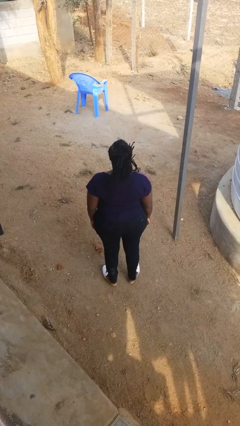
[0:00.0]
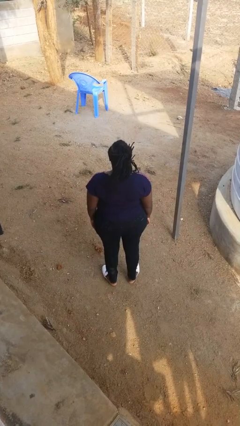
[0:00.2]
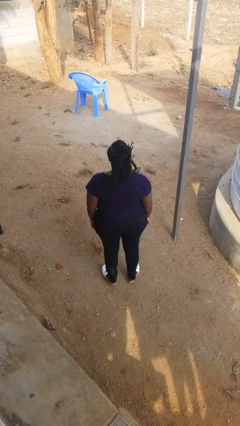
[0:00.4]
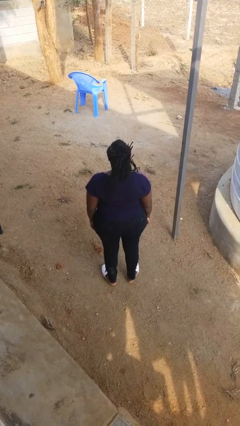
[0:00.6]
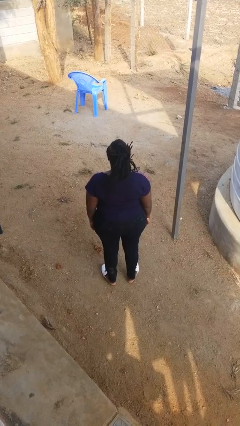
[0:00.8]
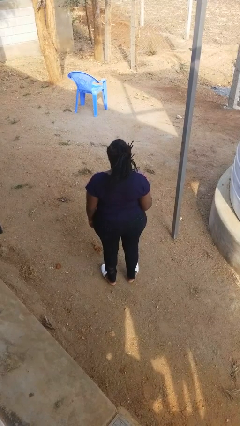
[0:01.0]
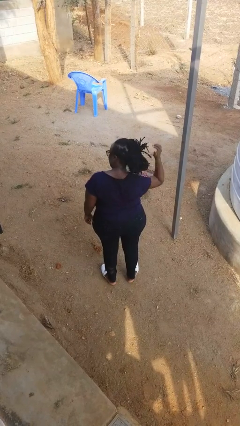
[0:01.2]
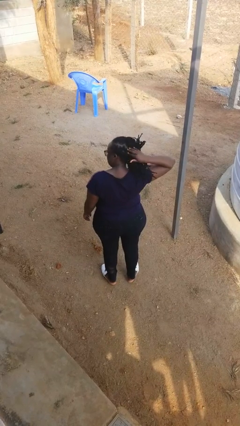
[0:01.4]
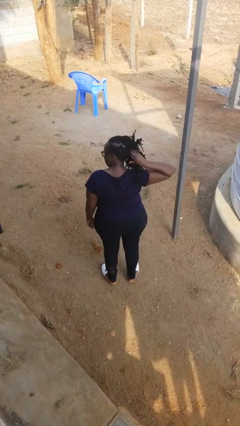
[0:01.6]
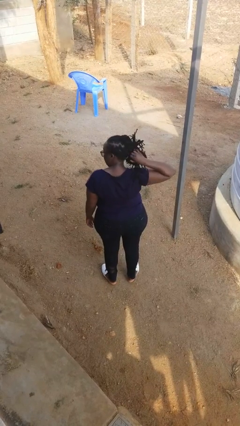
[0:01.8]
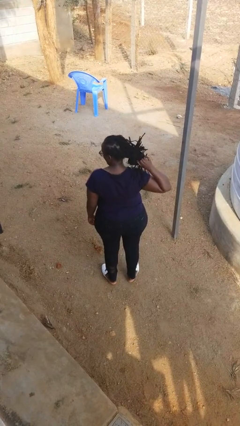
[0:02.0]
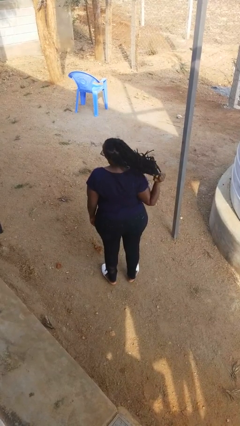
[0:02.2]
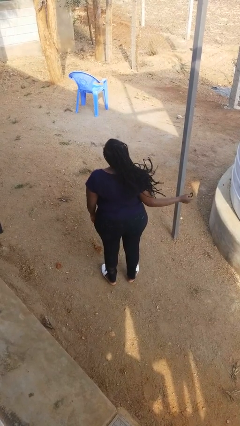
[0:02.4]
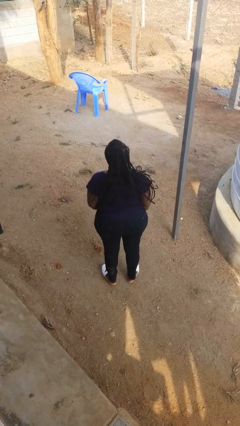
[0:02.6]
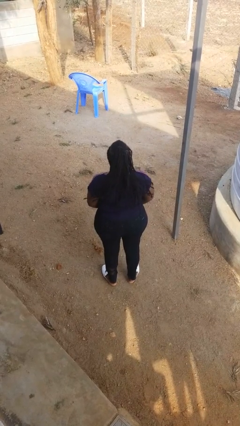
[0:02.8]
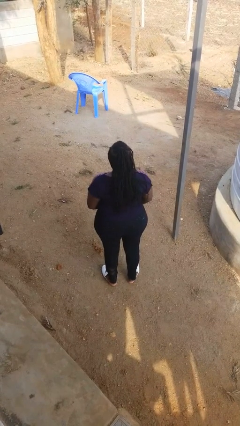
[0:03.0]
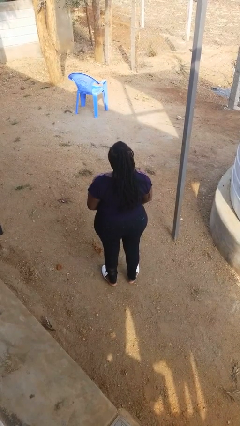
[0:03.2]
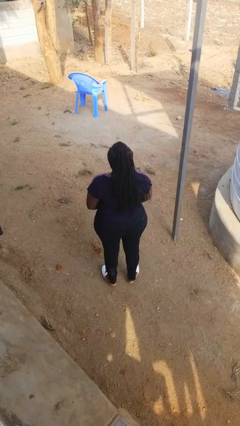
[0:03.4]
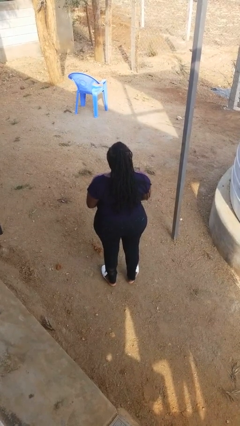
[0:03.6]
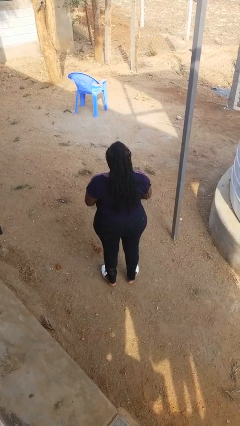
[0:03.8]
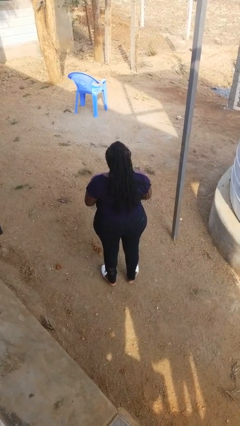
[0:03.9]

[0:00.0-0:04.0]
person takes off hairtie

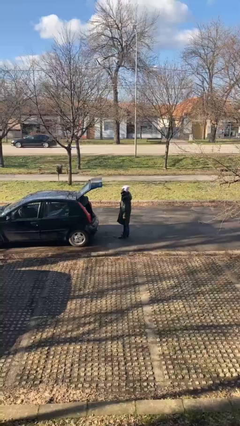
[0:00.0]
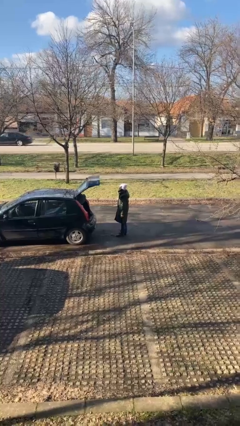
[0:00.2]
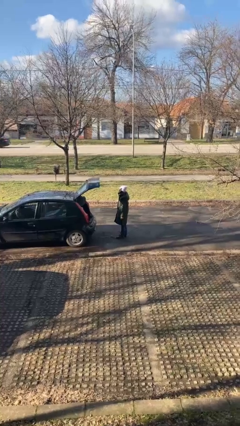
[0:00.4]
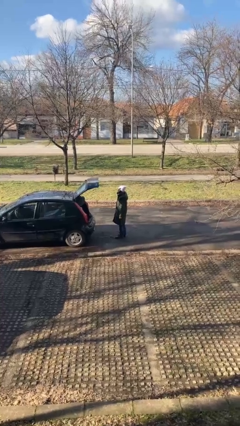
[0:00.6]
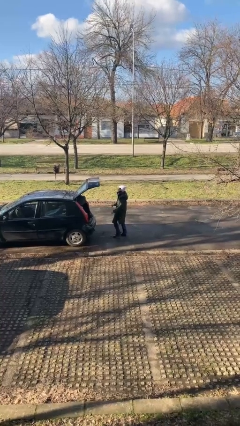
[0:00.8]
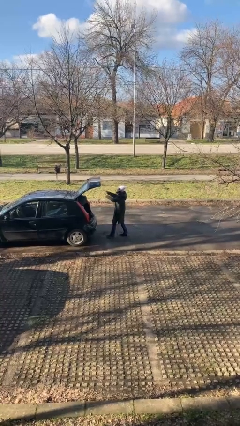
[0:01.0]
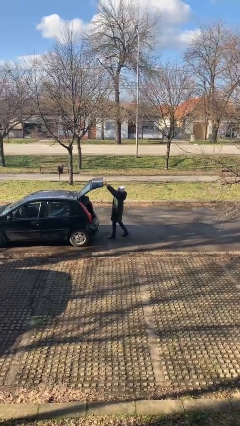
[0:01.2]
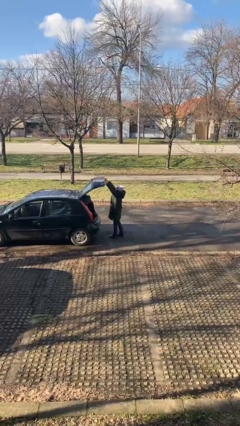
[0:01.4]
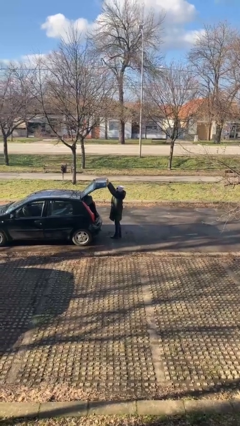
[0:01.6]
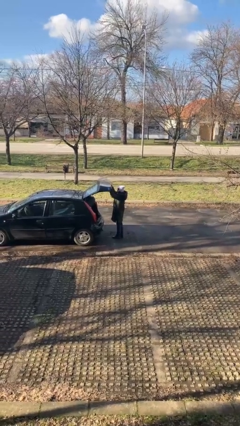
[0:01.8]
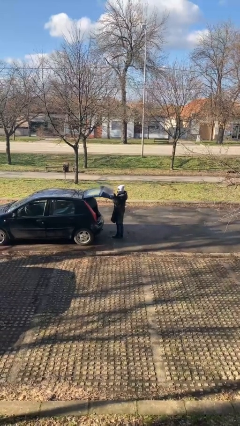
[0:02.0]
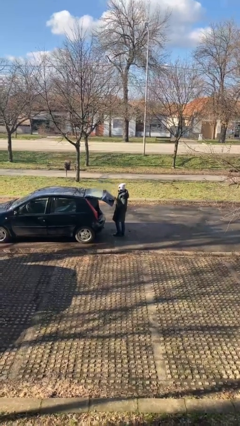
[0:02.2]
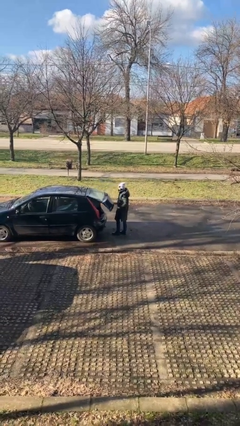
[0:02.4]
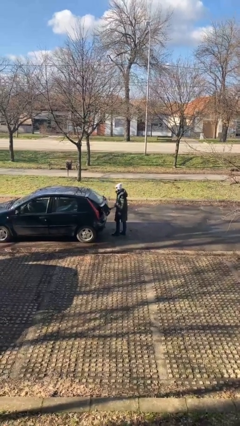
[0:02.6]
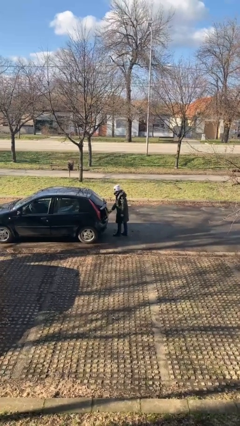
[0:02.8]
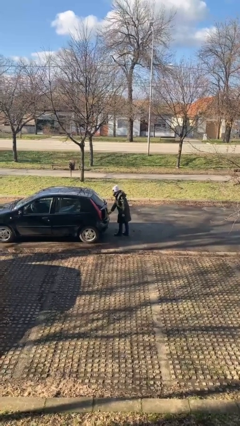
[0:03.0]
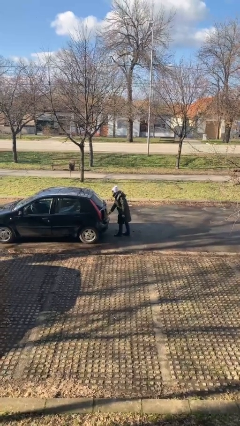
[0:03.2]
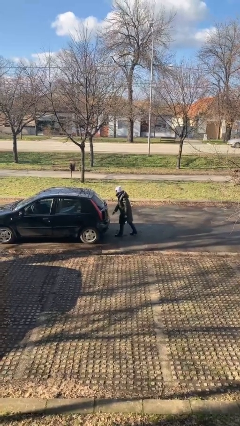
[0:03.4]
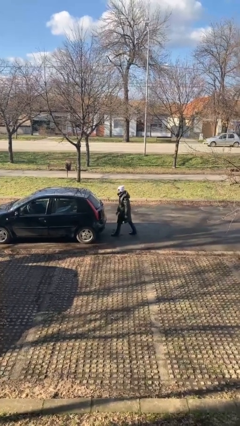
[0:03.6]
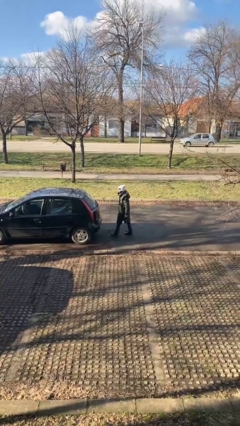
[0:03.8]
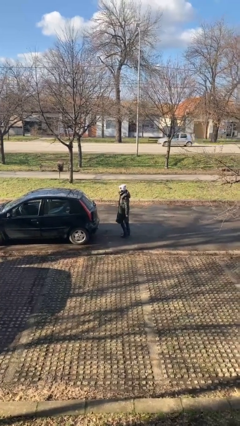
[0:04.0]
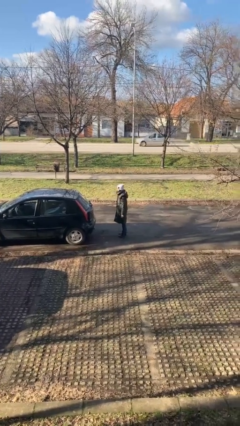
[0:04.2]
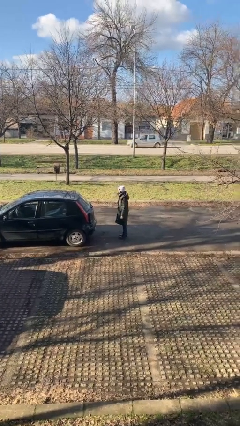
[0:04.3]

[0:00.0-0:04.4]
person closes car trunk

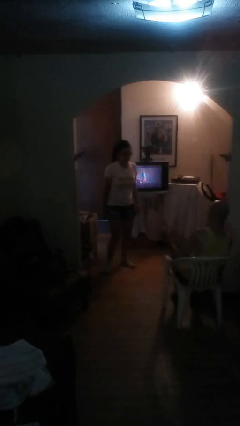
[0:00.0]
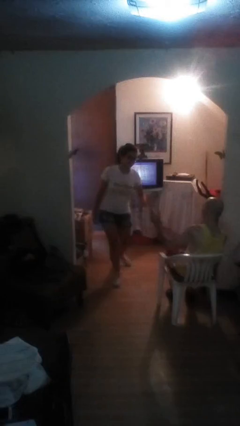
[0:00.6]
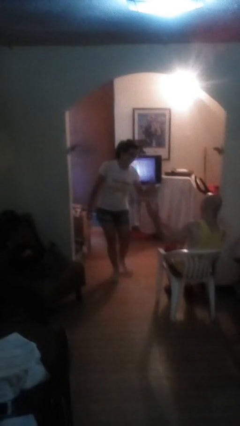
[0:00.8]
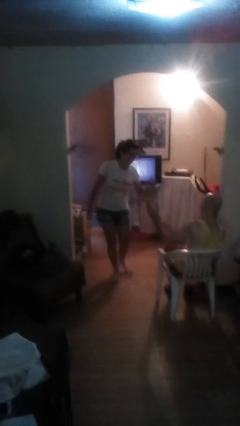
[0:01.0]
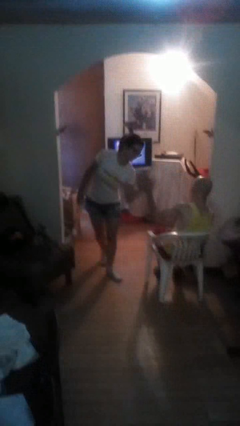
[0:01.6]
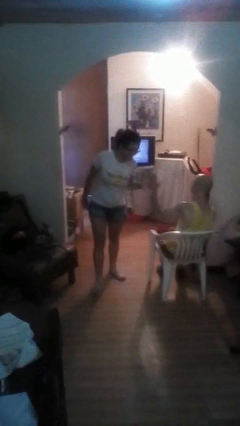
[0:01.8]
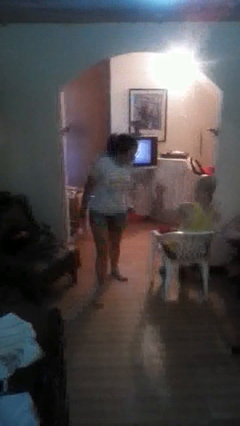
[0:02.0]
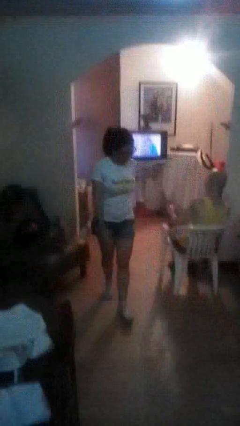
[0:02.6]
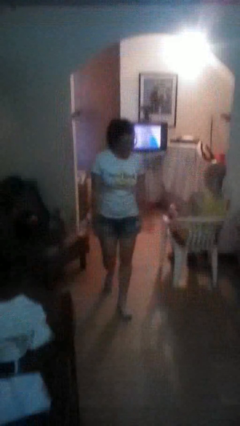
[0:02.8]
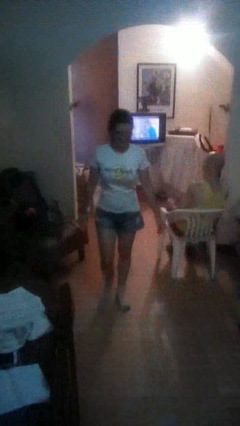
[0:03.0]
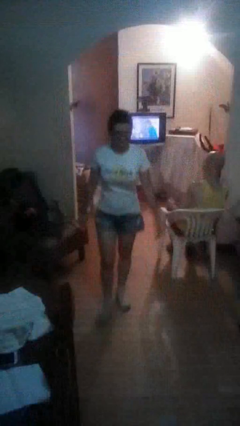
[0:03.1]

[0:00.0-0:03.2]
person highfives hand

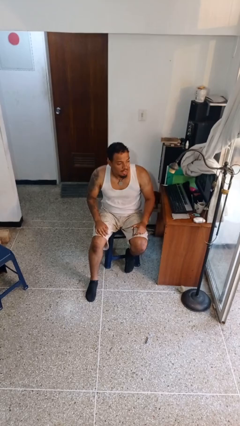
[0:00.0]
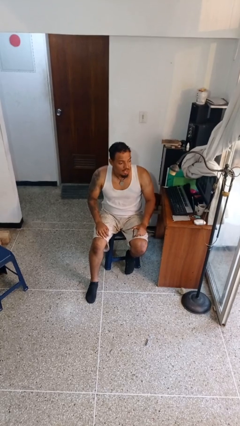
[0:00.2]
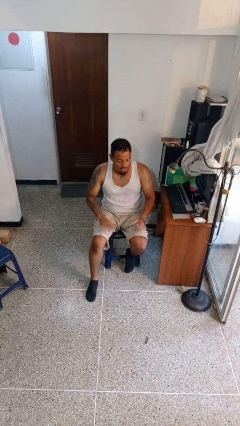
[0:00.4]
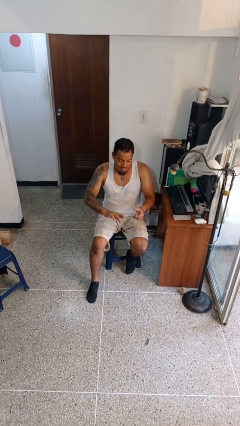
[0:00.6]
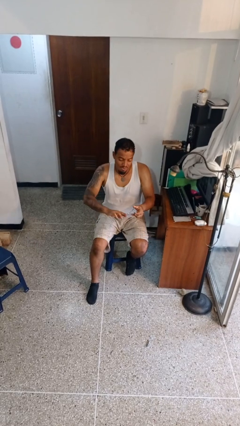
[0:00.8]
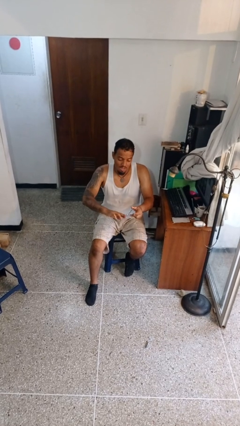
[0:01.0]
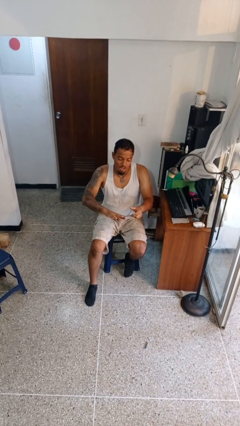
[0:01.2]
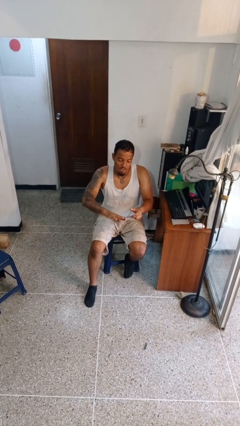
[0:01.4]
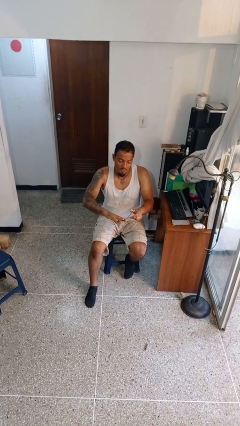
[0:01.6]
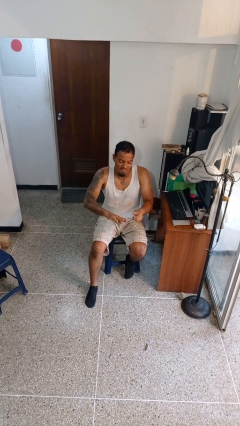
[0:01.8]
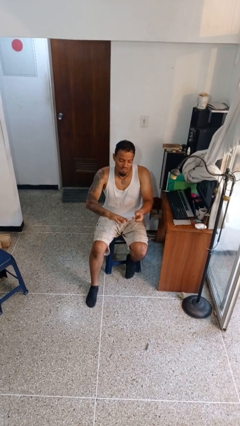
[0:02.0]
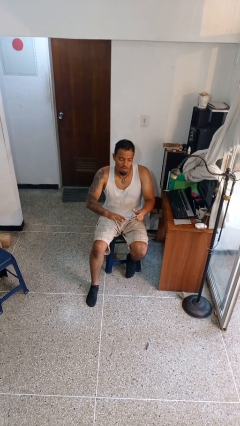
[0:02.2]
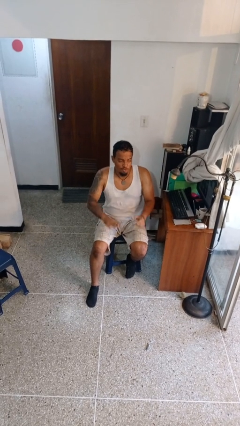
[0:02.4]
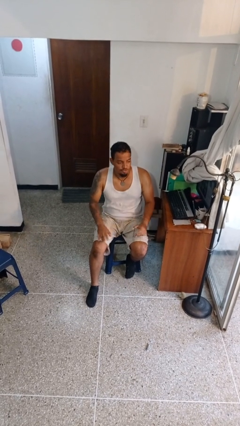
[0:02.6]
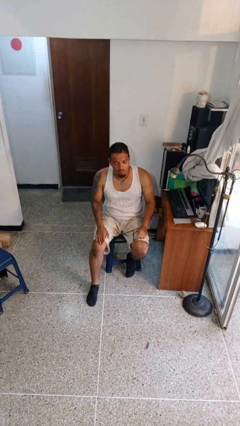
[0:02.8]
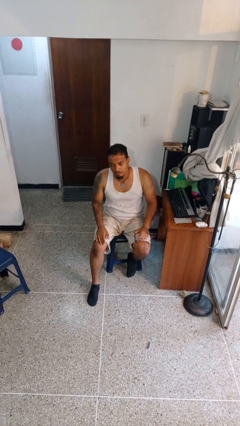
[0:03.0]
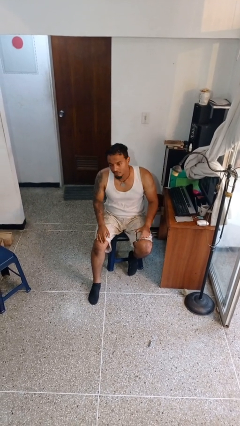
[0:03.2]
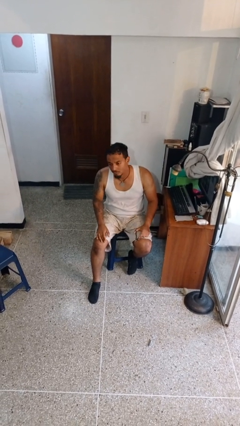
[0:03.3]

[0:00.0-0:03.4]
person clips fingernails

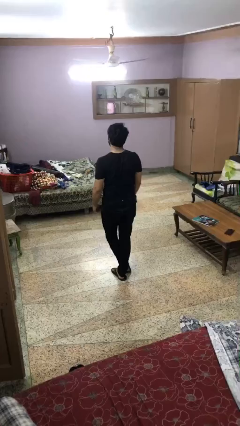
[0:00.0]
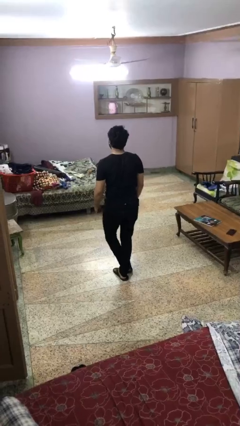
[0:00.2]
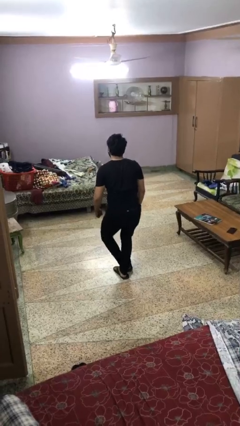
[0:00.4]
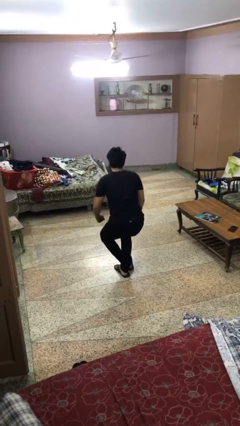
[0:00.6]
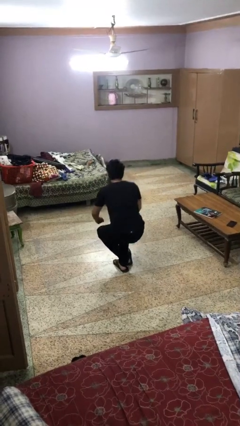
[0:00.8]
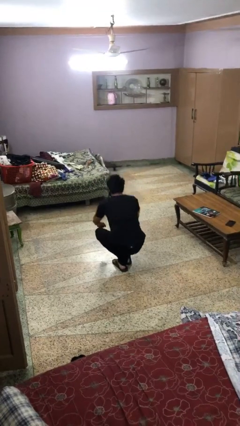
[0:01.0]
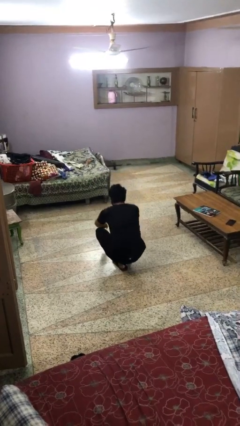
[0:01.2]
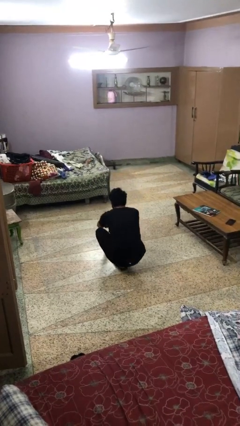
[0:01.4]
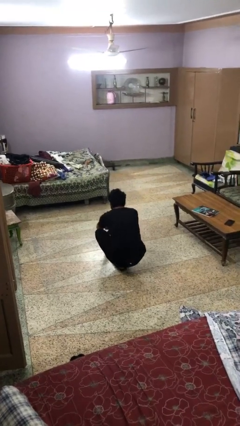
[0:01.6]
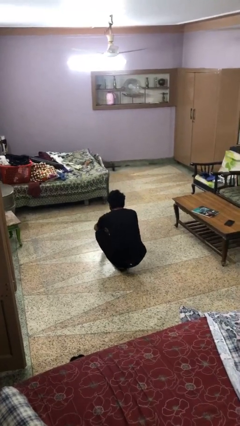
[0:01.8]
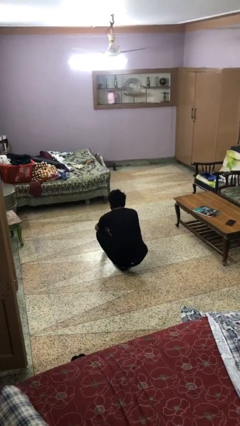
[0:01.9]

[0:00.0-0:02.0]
person sits crisscross

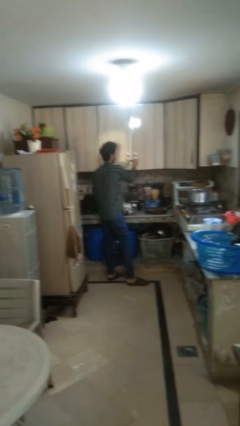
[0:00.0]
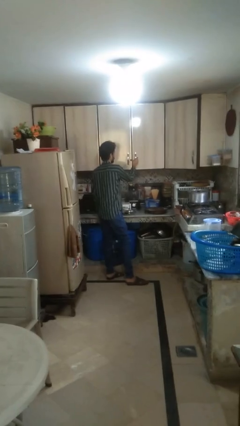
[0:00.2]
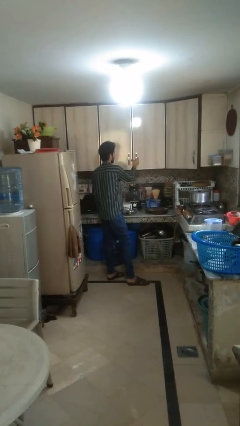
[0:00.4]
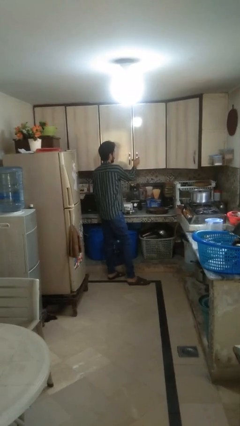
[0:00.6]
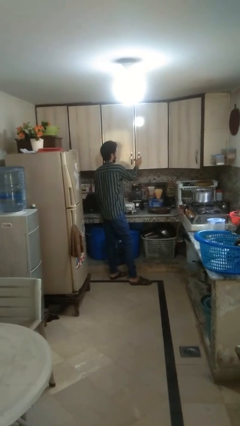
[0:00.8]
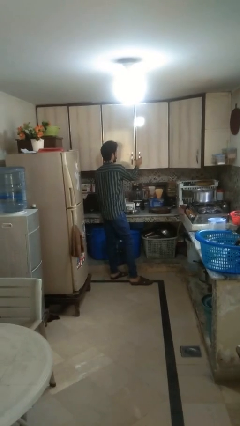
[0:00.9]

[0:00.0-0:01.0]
person closes cabinet

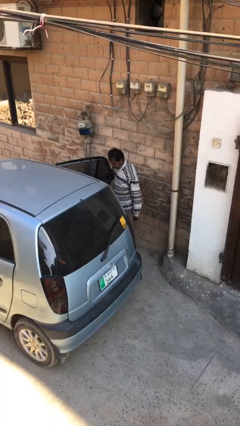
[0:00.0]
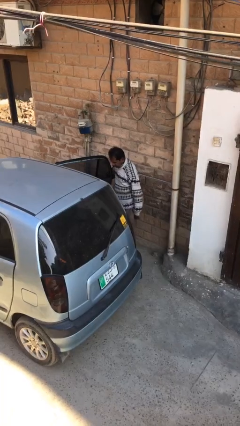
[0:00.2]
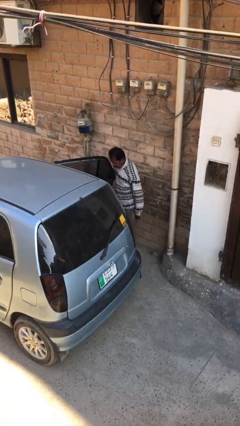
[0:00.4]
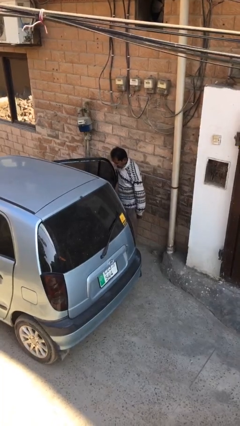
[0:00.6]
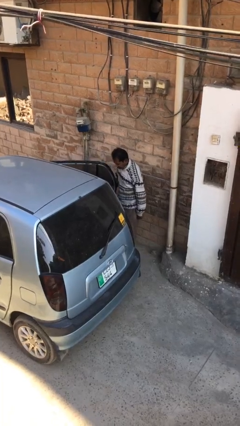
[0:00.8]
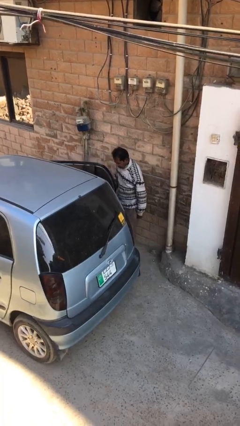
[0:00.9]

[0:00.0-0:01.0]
person closes car door
